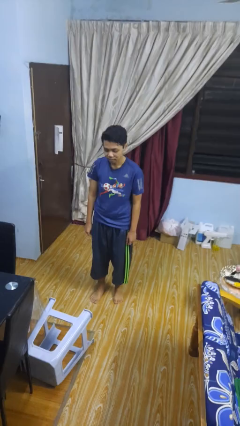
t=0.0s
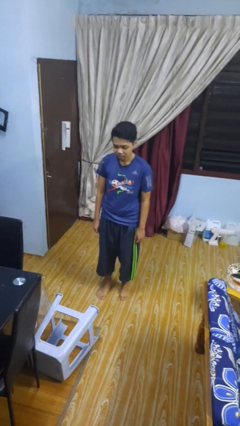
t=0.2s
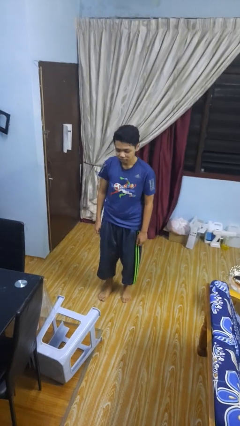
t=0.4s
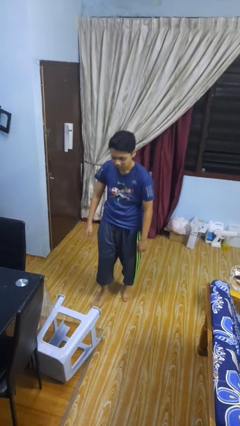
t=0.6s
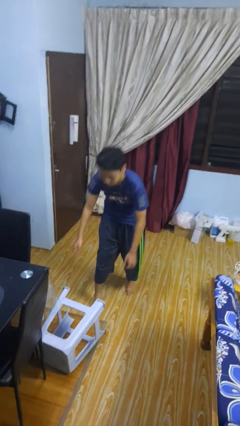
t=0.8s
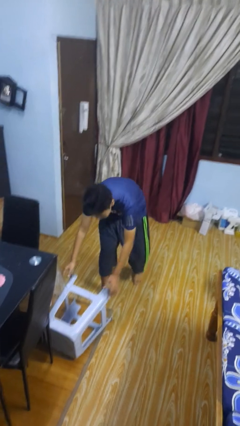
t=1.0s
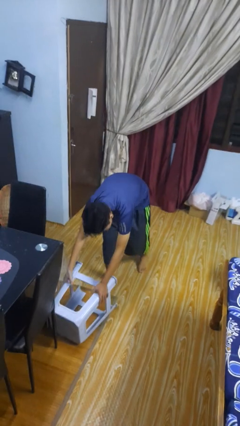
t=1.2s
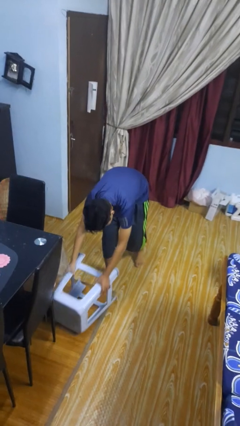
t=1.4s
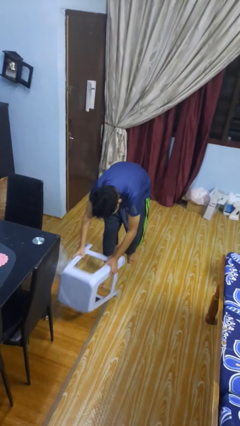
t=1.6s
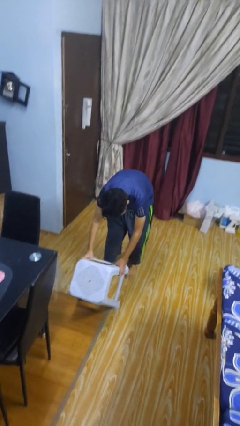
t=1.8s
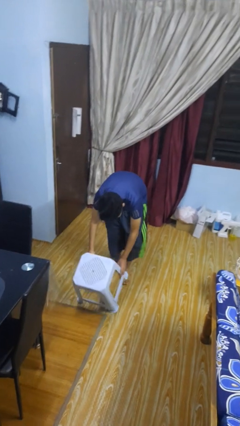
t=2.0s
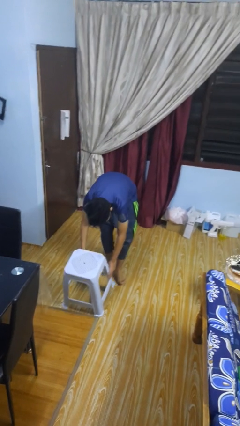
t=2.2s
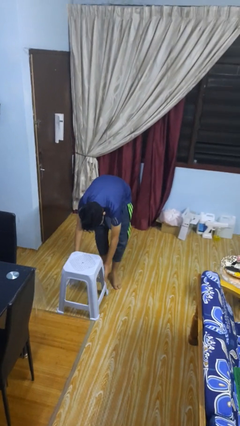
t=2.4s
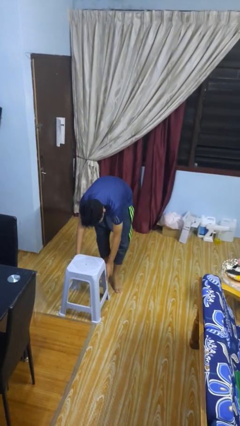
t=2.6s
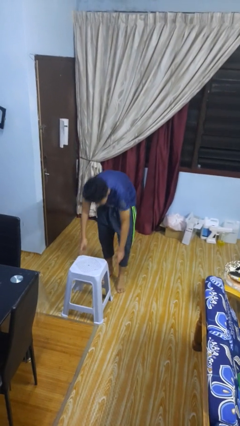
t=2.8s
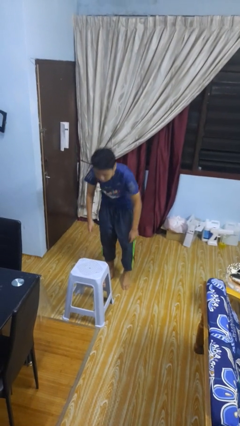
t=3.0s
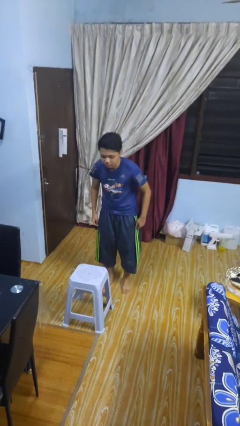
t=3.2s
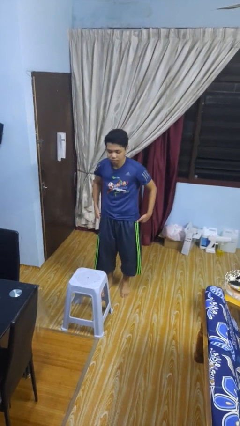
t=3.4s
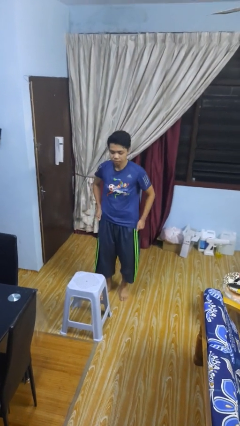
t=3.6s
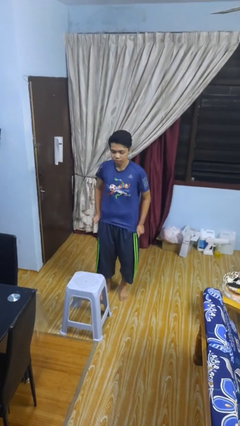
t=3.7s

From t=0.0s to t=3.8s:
person sets upright furniture

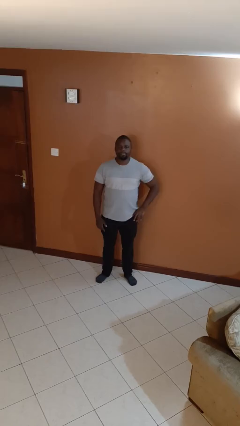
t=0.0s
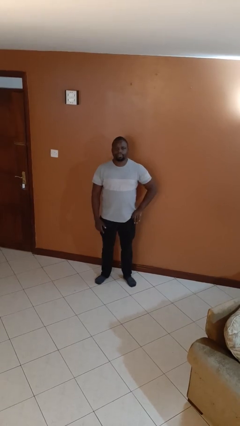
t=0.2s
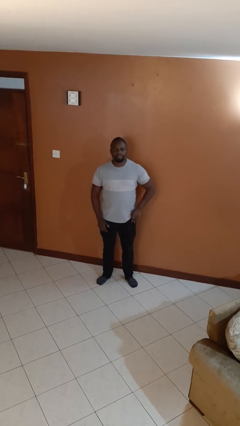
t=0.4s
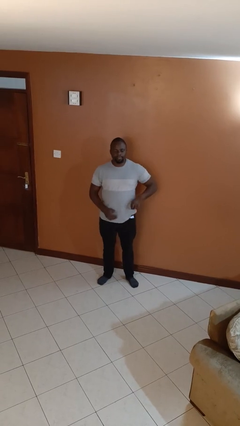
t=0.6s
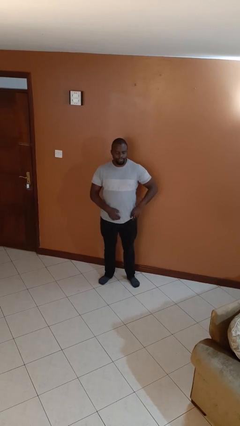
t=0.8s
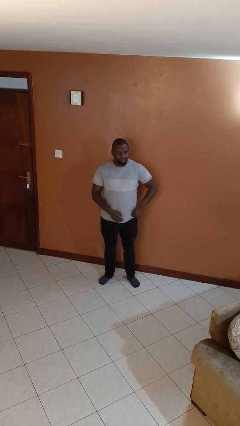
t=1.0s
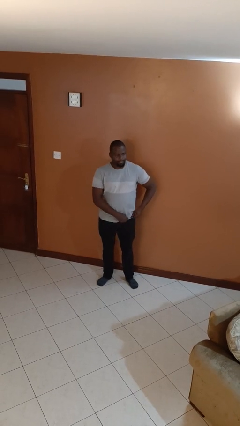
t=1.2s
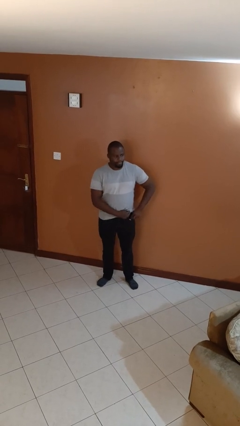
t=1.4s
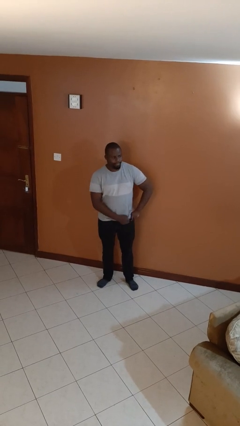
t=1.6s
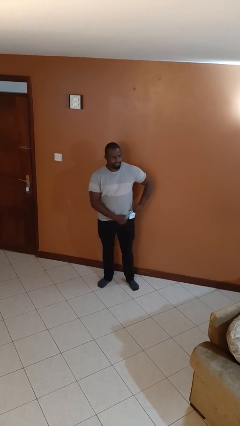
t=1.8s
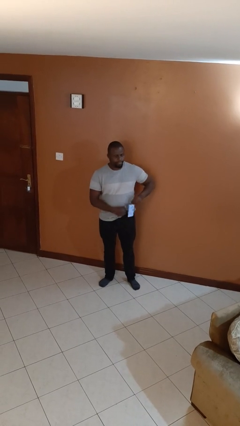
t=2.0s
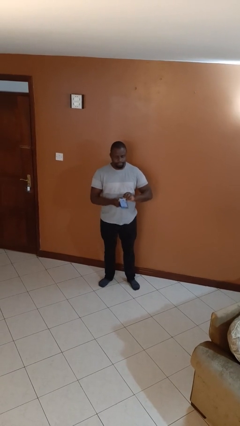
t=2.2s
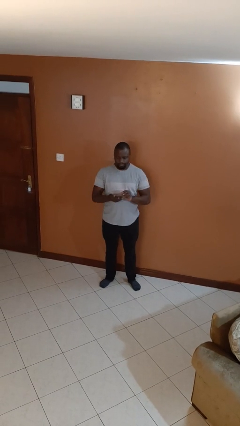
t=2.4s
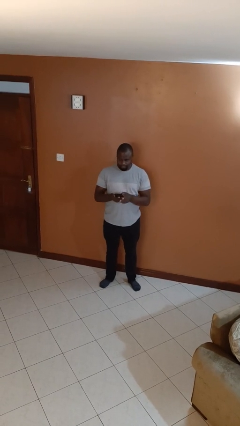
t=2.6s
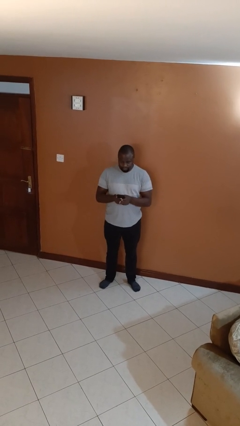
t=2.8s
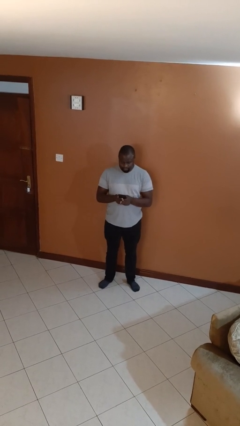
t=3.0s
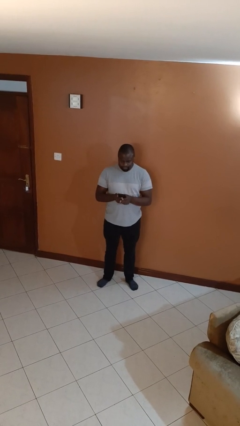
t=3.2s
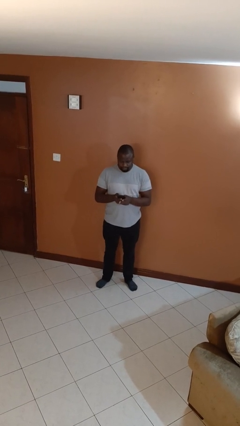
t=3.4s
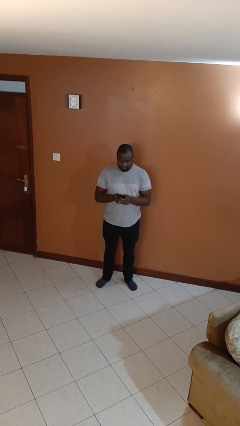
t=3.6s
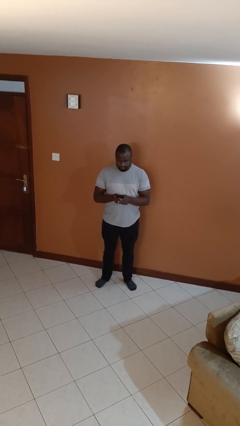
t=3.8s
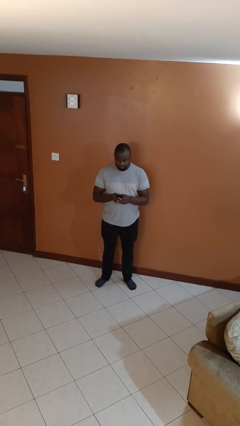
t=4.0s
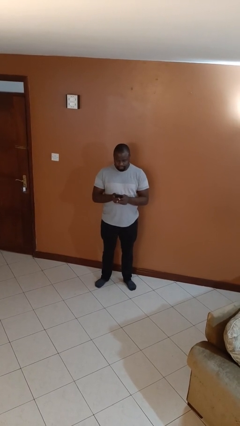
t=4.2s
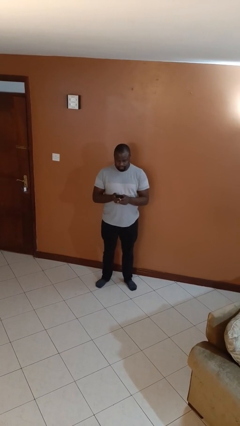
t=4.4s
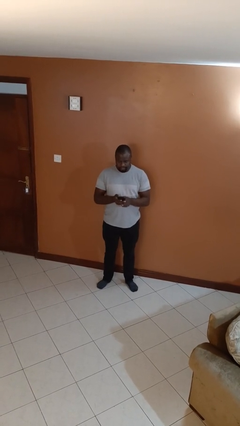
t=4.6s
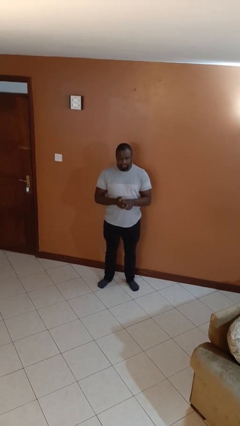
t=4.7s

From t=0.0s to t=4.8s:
person takes phone from pocket

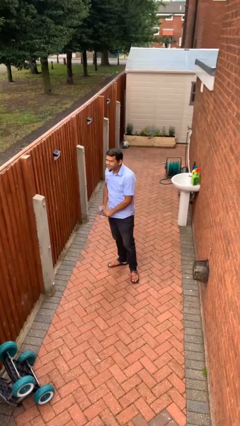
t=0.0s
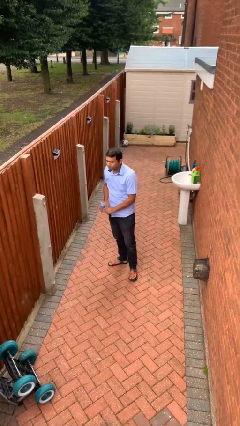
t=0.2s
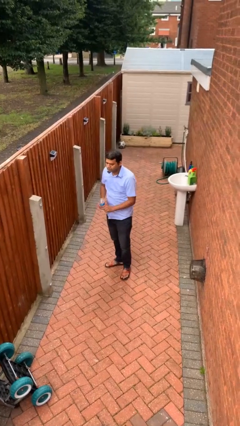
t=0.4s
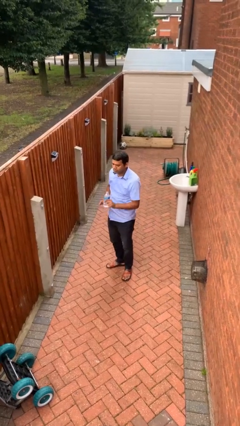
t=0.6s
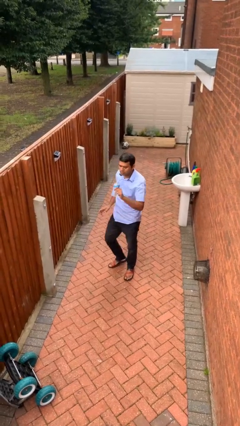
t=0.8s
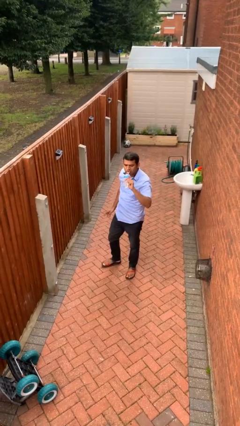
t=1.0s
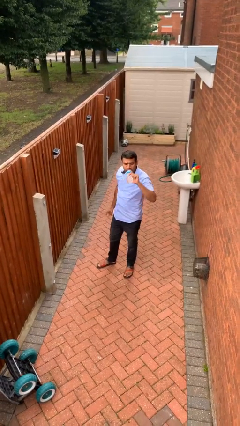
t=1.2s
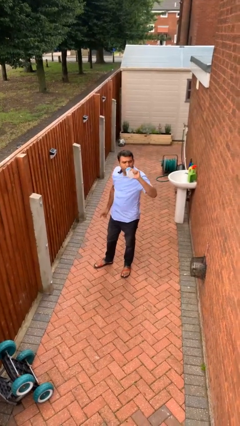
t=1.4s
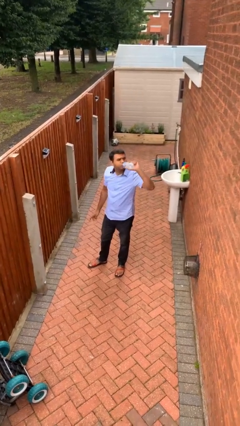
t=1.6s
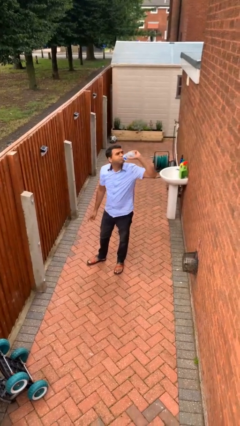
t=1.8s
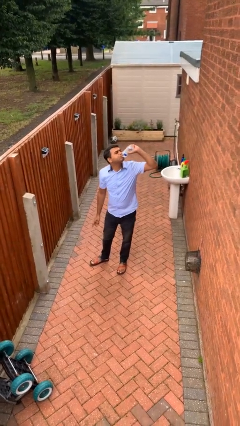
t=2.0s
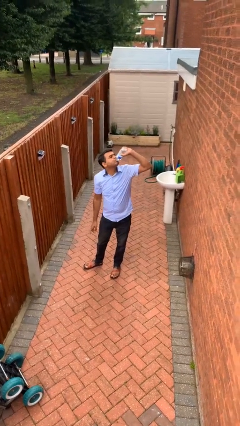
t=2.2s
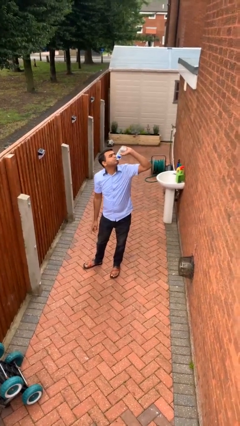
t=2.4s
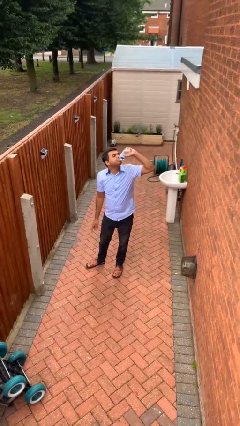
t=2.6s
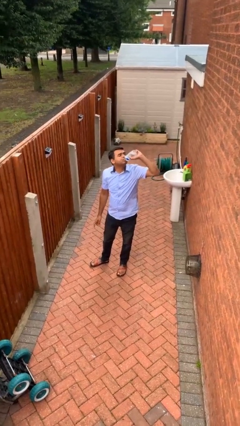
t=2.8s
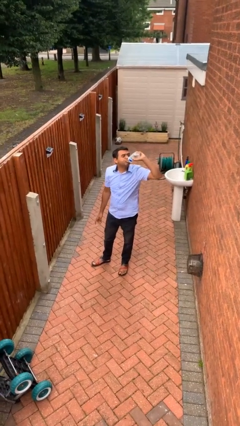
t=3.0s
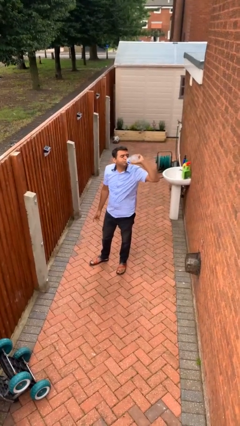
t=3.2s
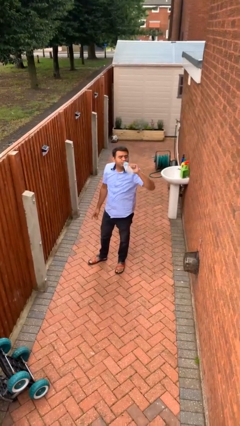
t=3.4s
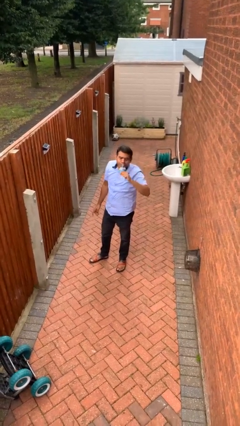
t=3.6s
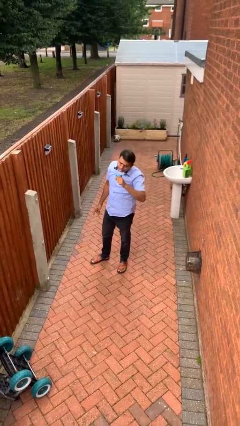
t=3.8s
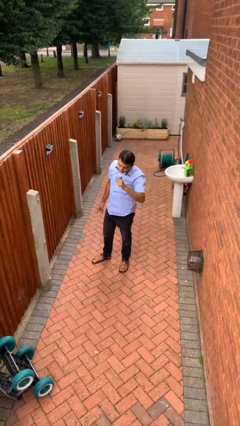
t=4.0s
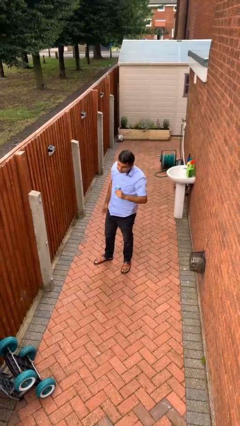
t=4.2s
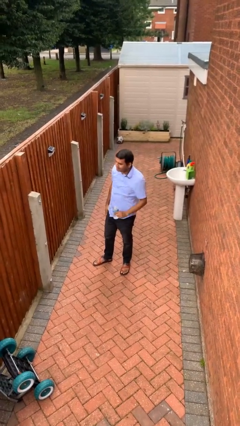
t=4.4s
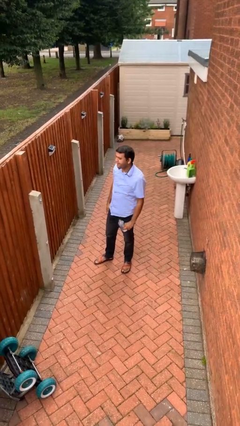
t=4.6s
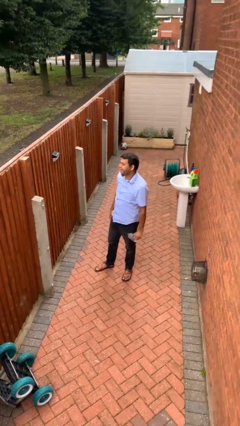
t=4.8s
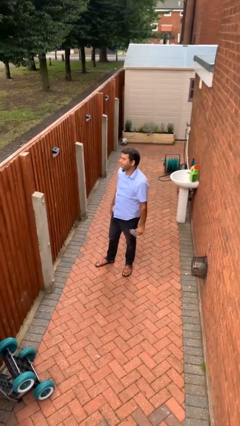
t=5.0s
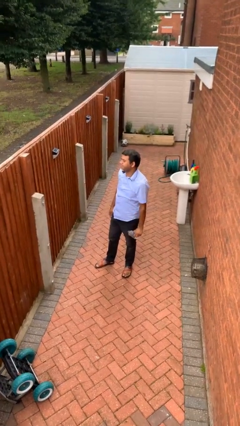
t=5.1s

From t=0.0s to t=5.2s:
person drinks from bottle

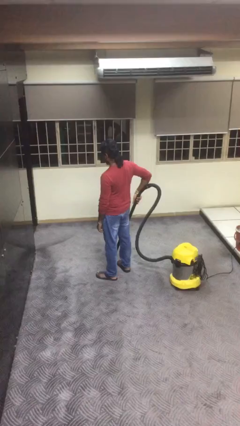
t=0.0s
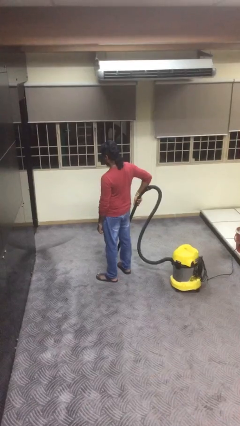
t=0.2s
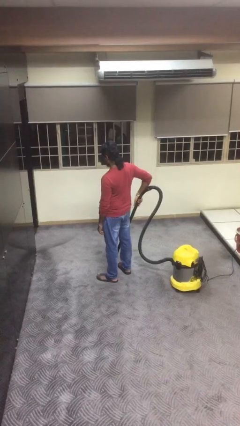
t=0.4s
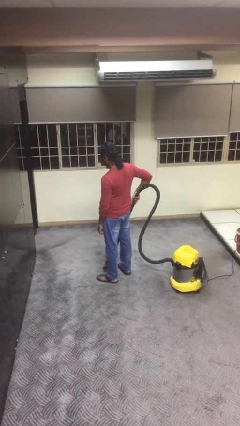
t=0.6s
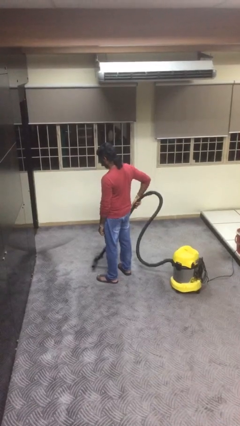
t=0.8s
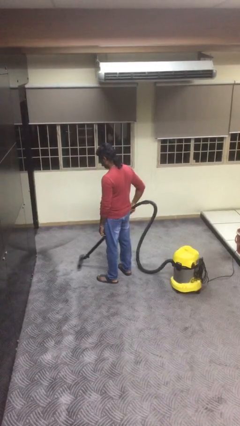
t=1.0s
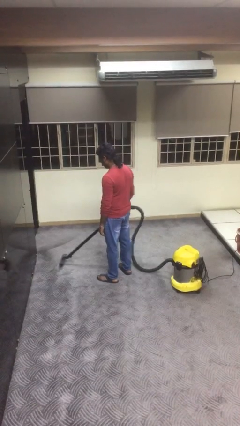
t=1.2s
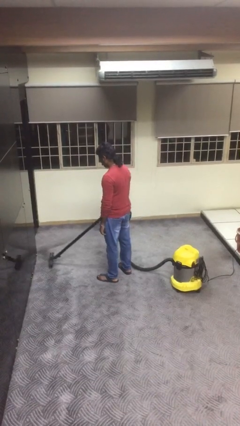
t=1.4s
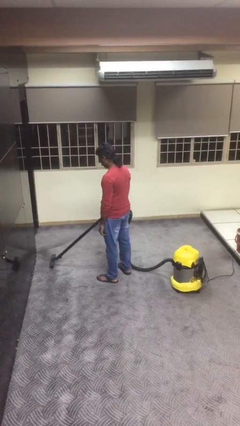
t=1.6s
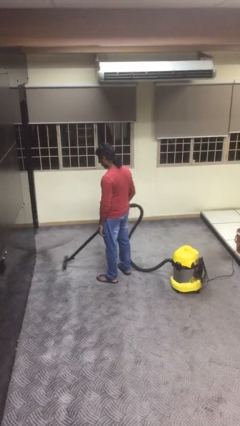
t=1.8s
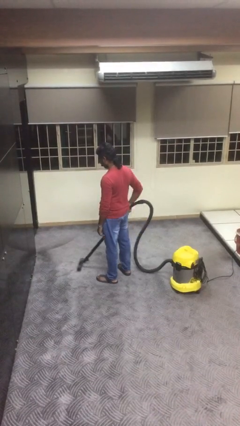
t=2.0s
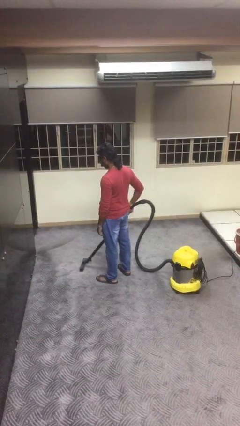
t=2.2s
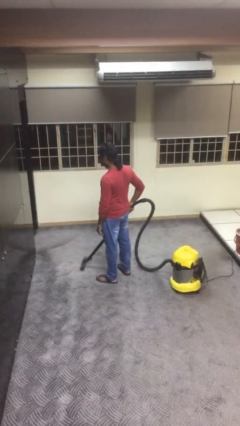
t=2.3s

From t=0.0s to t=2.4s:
person vacuums carpet

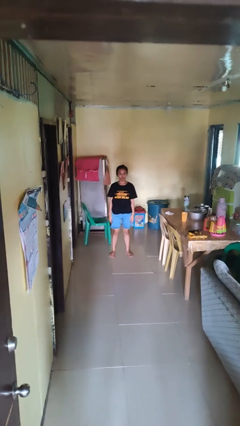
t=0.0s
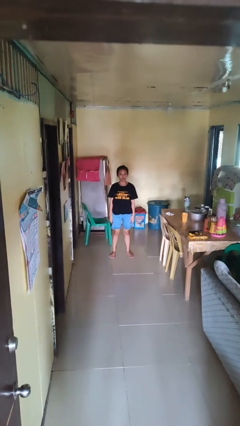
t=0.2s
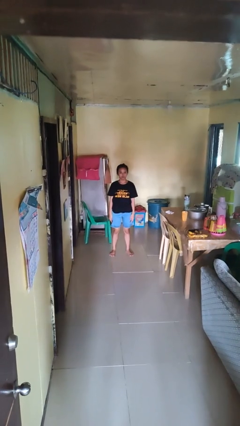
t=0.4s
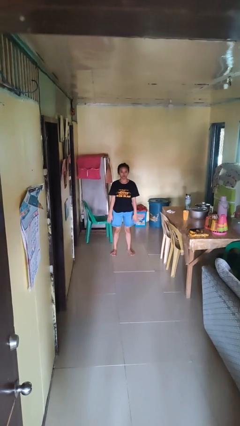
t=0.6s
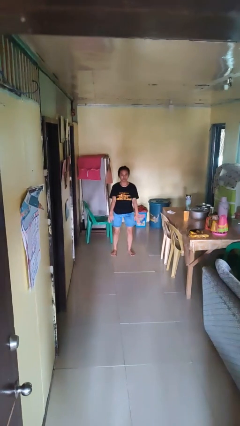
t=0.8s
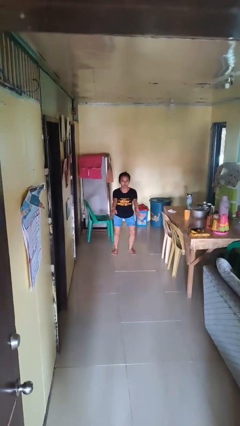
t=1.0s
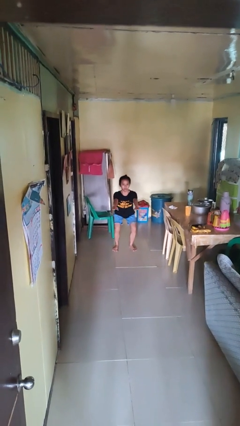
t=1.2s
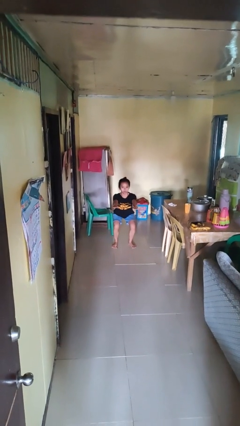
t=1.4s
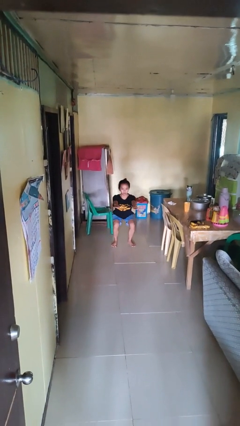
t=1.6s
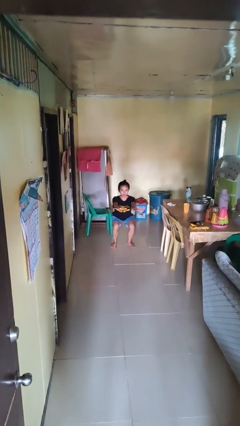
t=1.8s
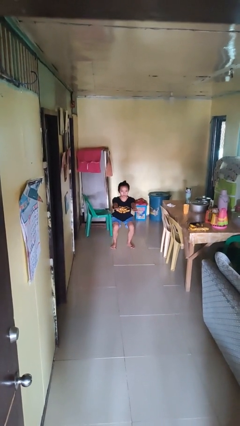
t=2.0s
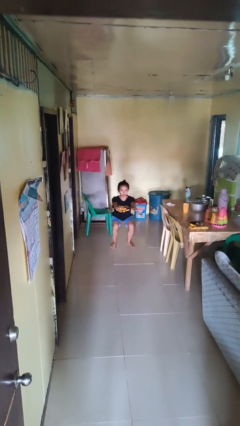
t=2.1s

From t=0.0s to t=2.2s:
person squats
